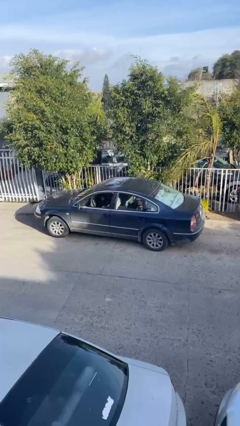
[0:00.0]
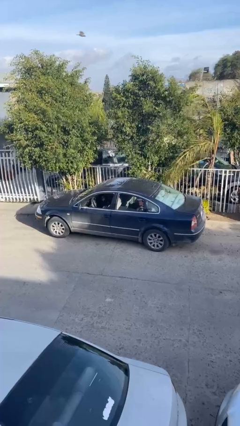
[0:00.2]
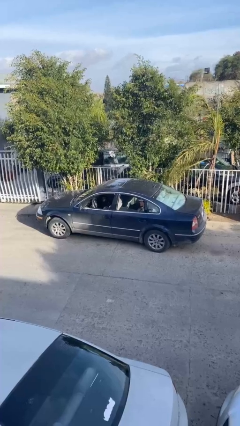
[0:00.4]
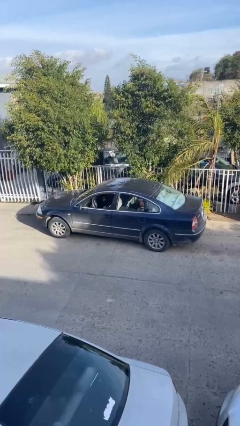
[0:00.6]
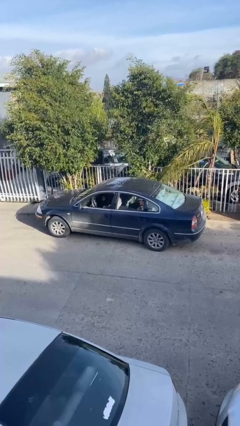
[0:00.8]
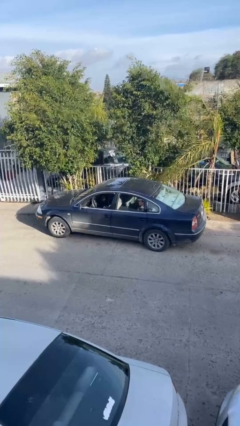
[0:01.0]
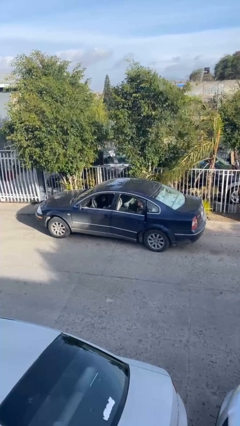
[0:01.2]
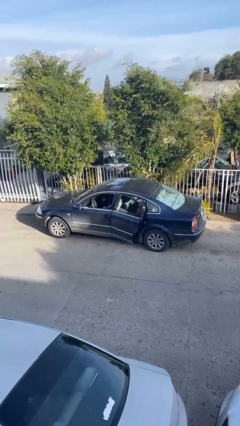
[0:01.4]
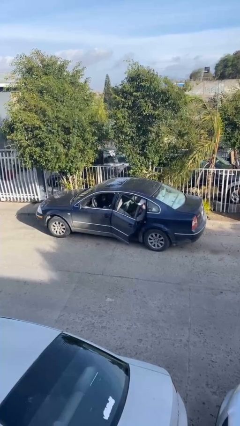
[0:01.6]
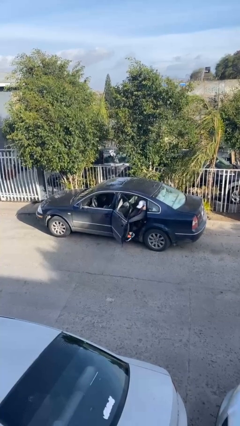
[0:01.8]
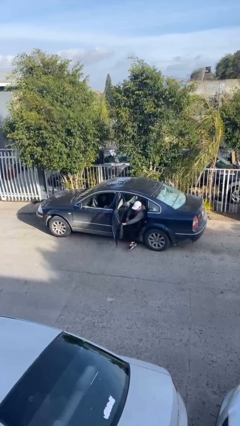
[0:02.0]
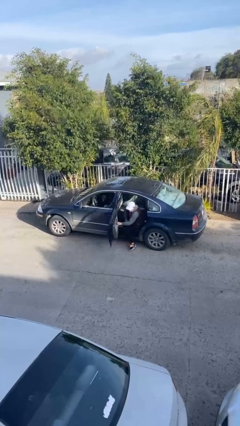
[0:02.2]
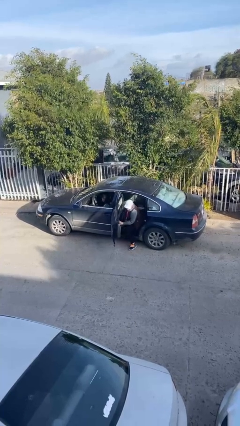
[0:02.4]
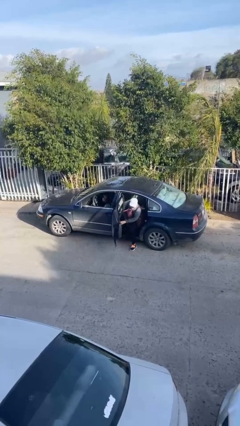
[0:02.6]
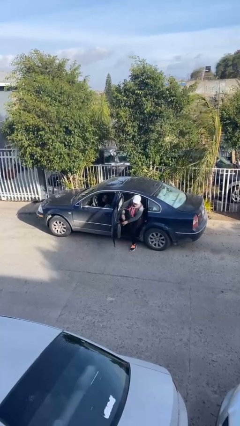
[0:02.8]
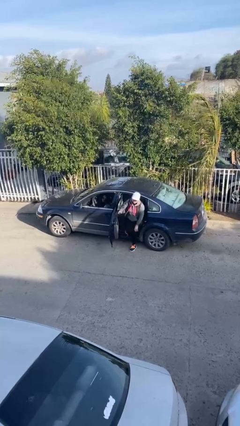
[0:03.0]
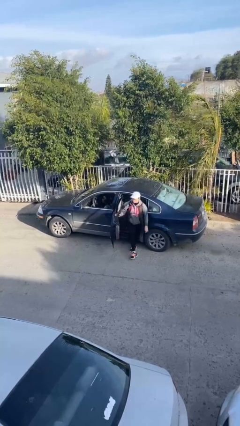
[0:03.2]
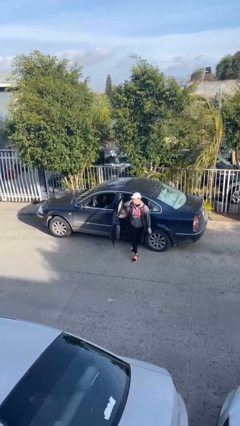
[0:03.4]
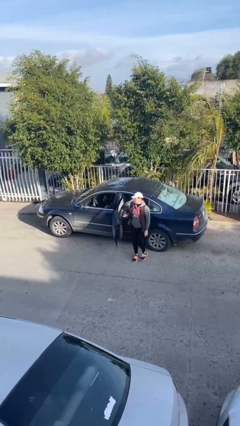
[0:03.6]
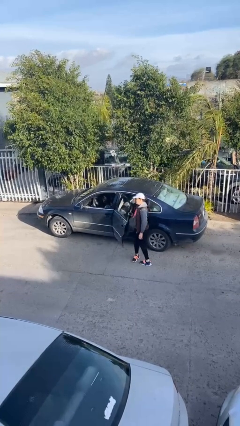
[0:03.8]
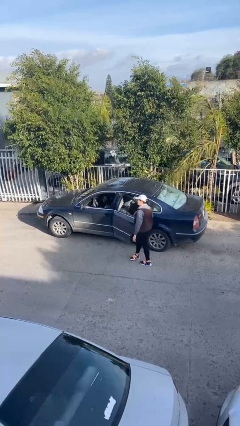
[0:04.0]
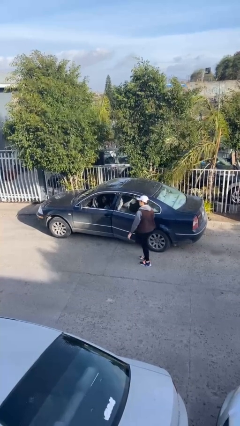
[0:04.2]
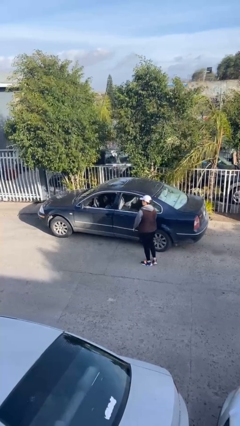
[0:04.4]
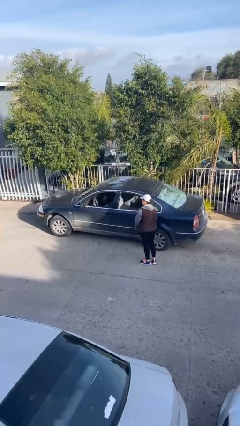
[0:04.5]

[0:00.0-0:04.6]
car drops off person

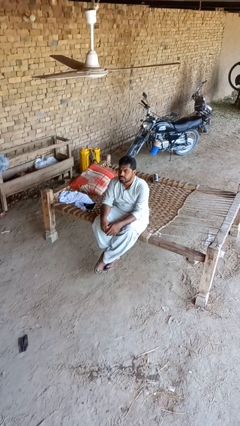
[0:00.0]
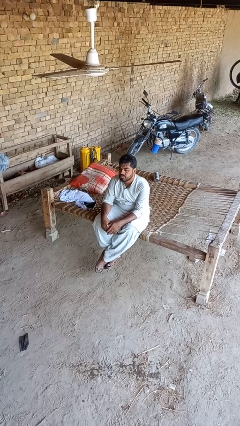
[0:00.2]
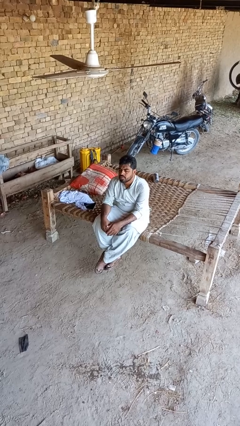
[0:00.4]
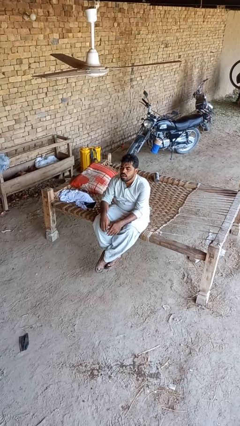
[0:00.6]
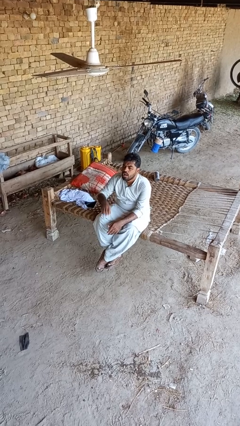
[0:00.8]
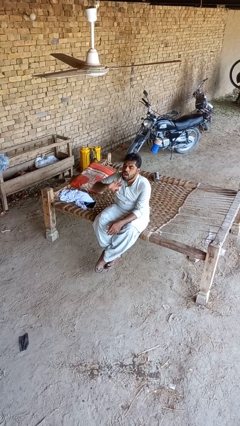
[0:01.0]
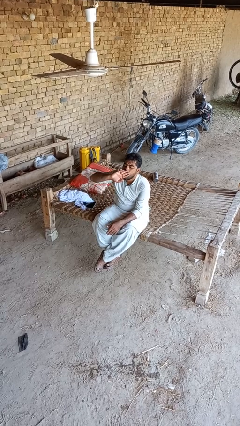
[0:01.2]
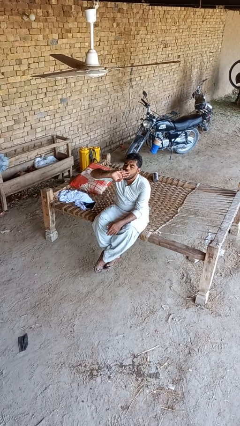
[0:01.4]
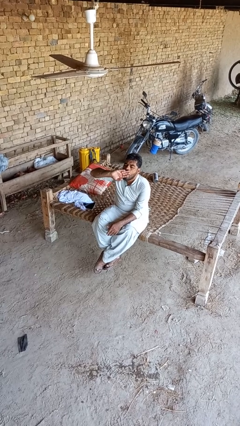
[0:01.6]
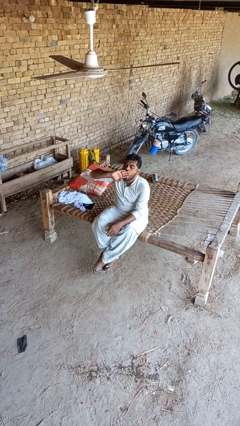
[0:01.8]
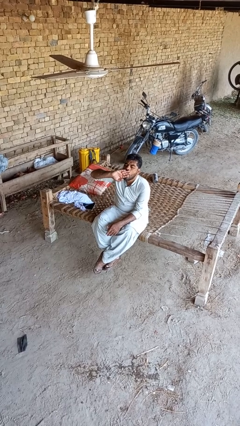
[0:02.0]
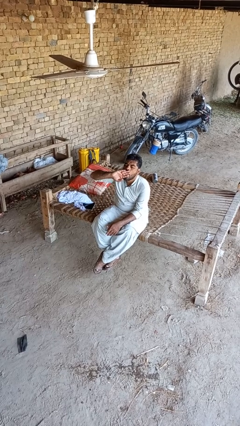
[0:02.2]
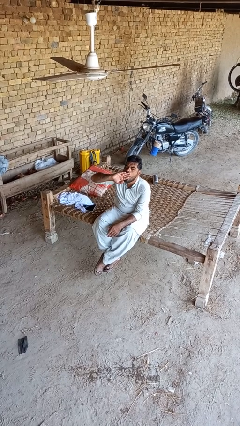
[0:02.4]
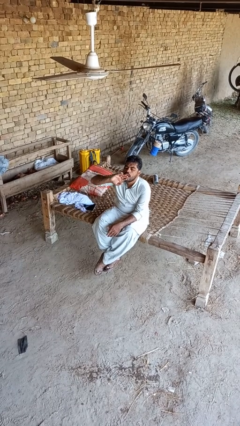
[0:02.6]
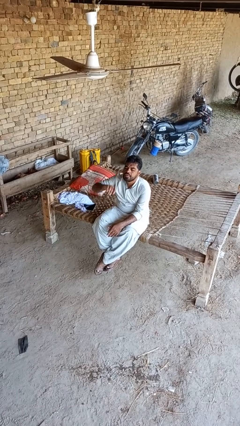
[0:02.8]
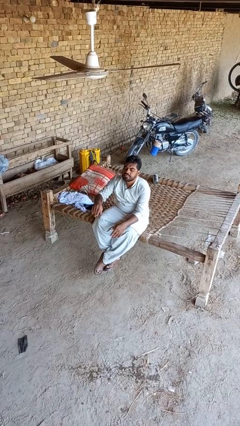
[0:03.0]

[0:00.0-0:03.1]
person yawns

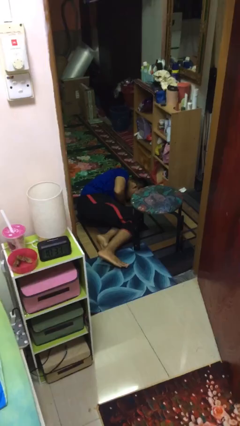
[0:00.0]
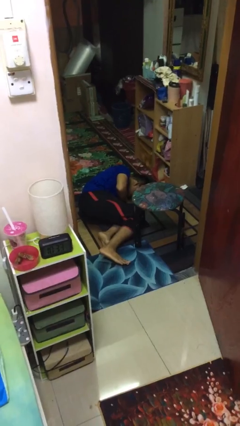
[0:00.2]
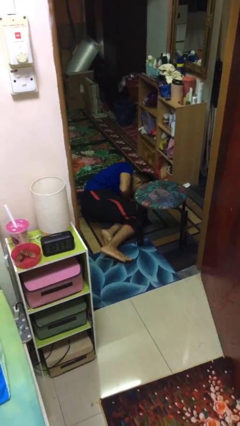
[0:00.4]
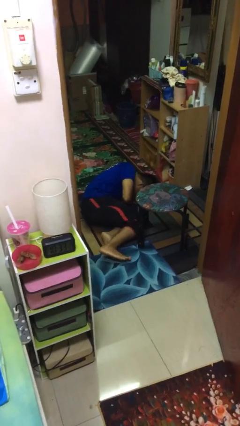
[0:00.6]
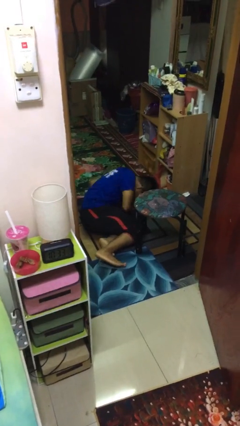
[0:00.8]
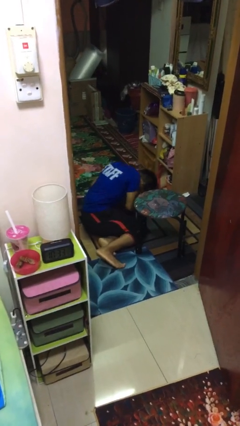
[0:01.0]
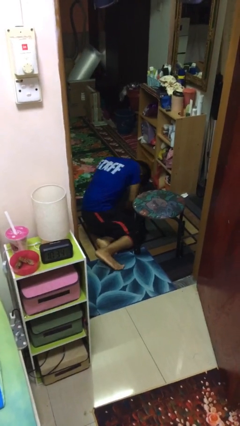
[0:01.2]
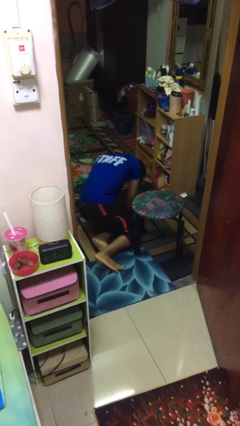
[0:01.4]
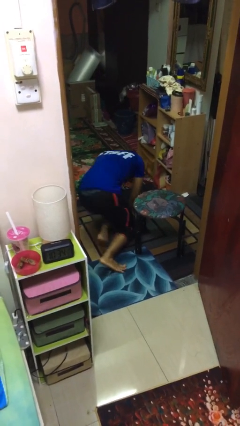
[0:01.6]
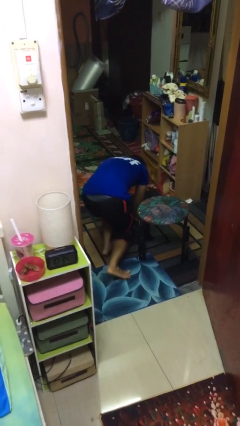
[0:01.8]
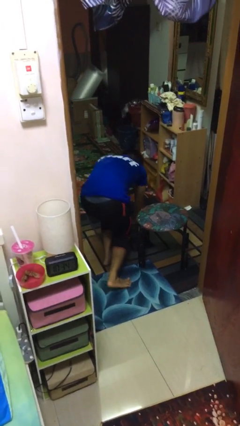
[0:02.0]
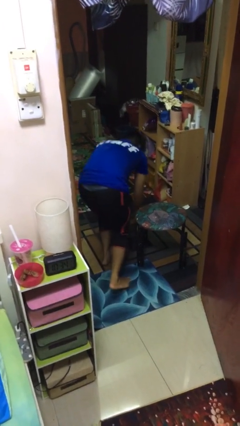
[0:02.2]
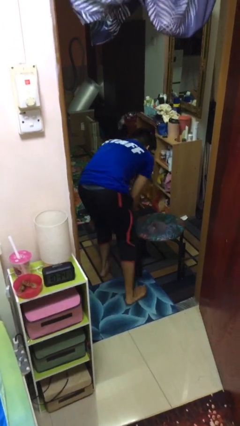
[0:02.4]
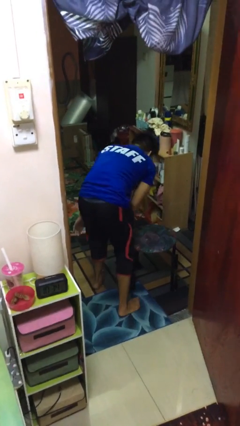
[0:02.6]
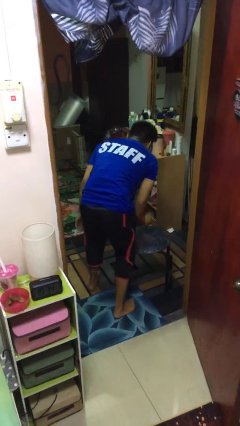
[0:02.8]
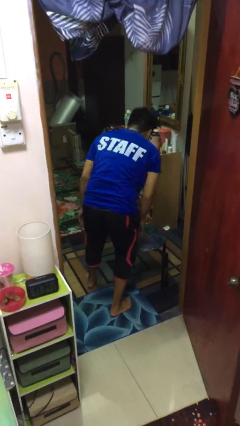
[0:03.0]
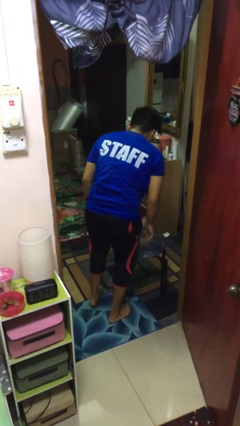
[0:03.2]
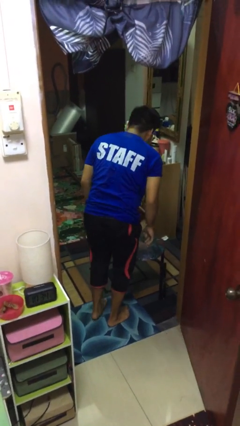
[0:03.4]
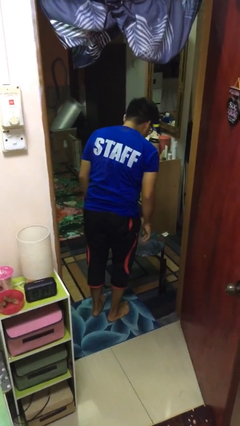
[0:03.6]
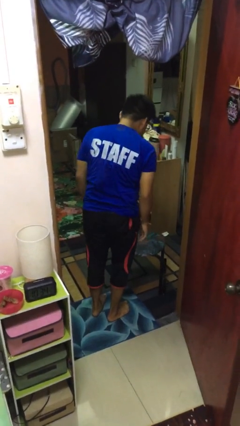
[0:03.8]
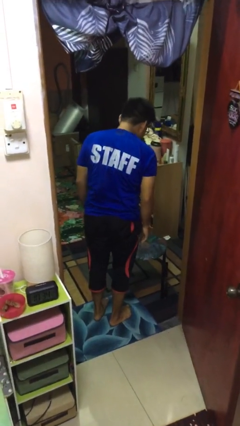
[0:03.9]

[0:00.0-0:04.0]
person stands up from floor

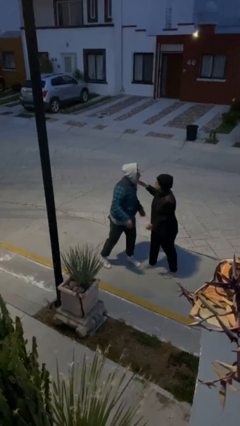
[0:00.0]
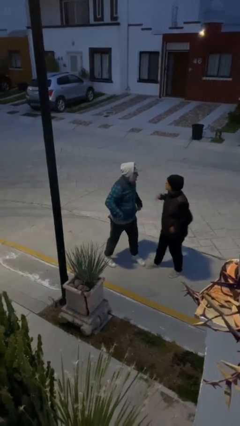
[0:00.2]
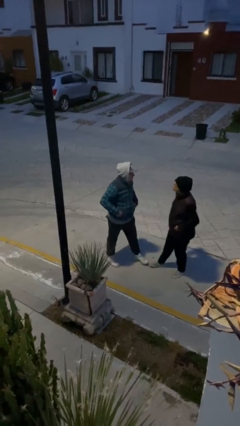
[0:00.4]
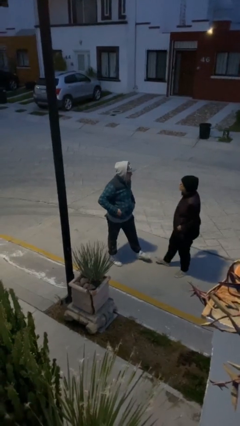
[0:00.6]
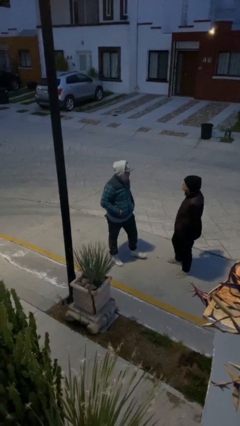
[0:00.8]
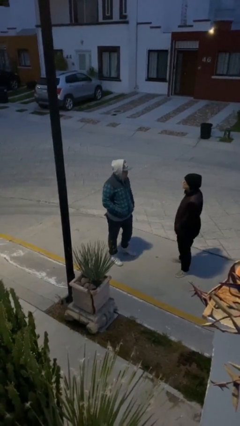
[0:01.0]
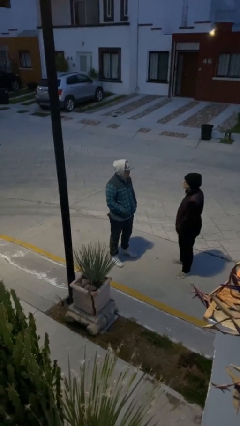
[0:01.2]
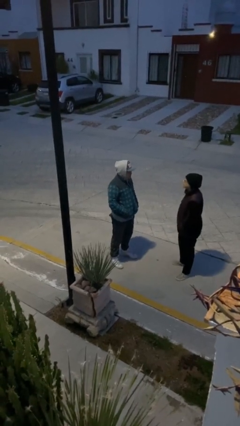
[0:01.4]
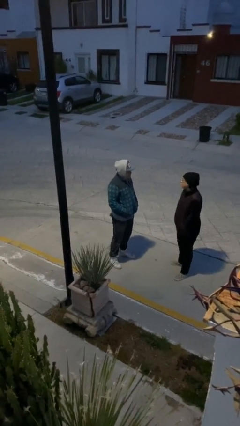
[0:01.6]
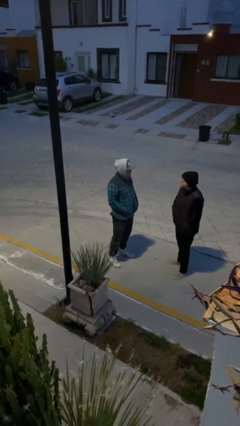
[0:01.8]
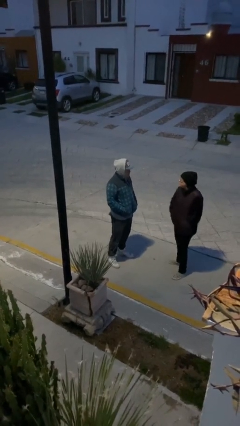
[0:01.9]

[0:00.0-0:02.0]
person talks to person

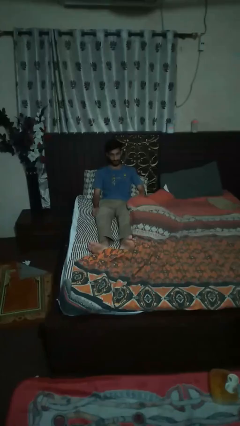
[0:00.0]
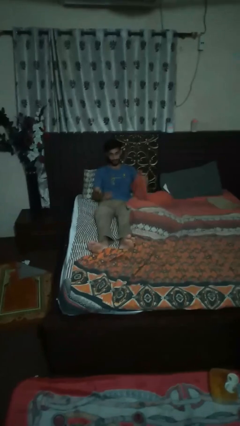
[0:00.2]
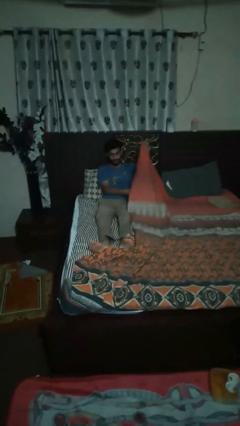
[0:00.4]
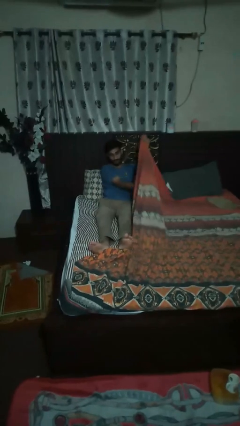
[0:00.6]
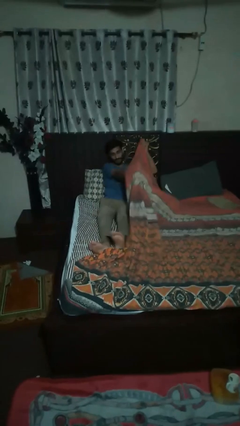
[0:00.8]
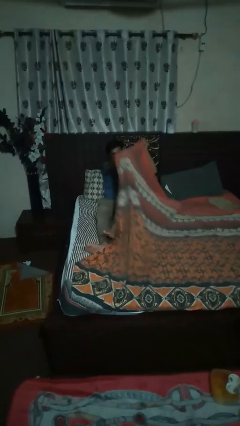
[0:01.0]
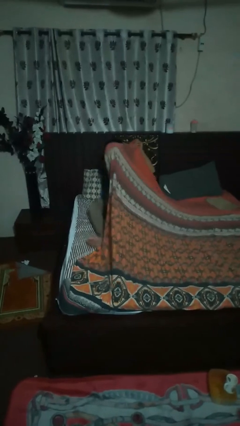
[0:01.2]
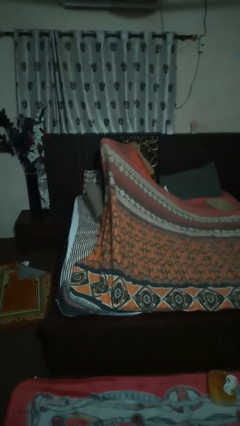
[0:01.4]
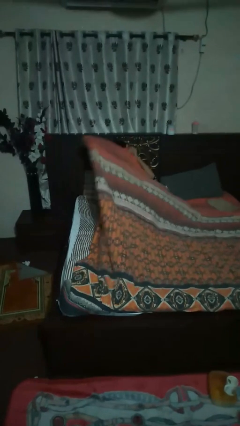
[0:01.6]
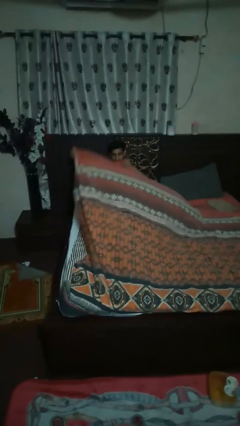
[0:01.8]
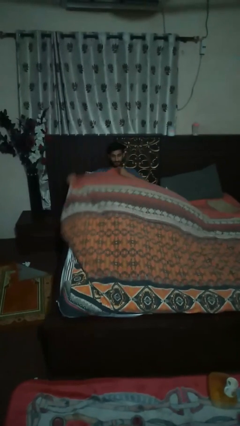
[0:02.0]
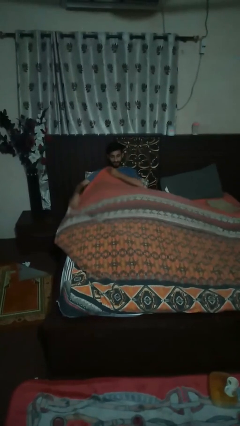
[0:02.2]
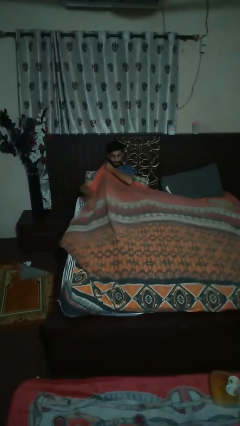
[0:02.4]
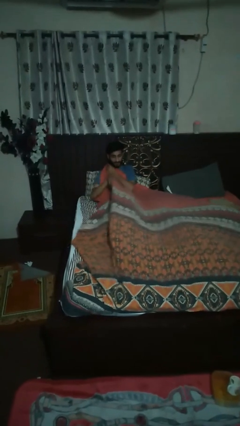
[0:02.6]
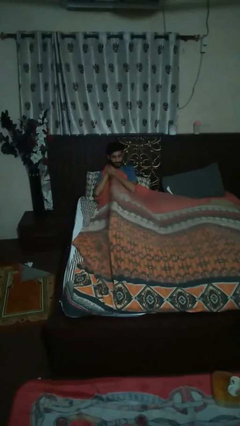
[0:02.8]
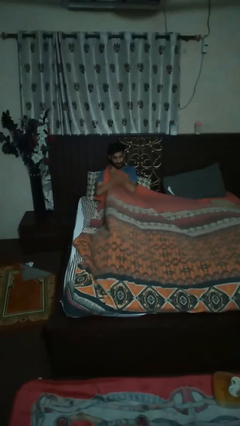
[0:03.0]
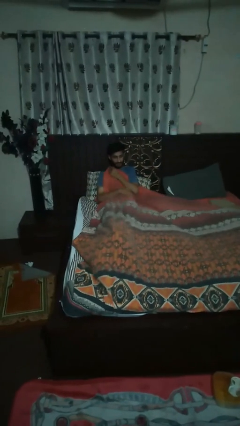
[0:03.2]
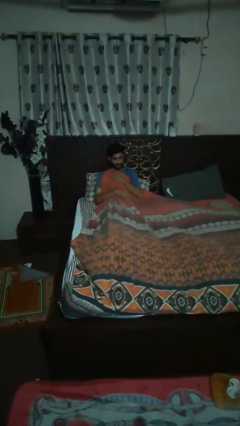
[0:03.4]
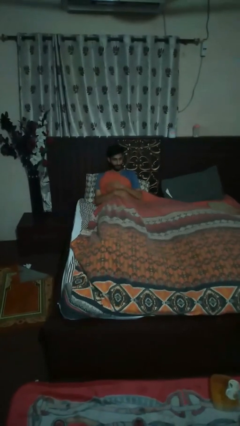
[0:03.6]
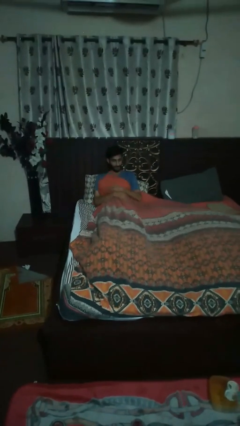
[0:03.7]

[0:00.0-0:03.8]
person covers with bedsheets
